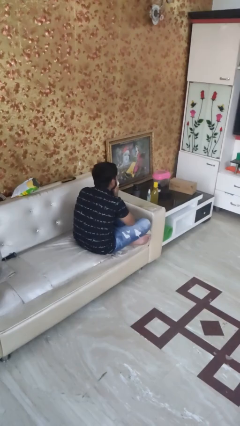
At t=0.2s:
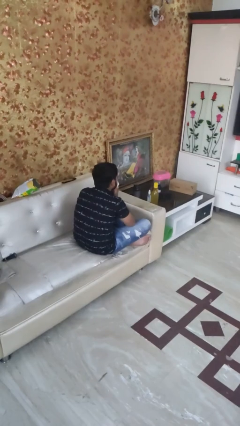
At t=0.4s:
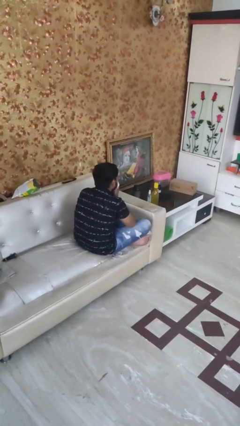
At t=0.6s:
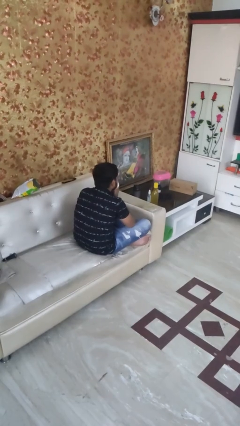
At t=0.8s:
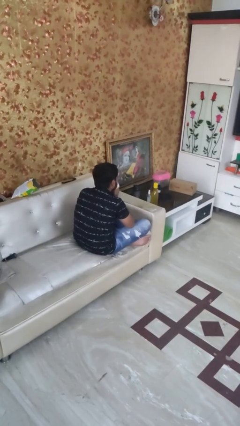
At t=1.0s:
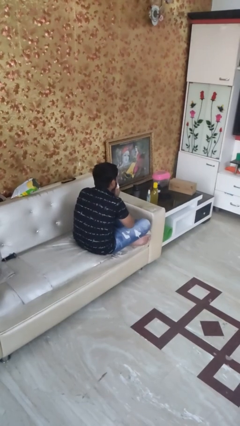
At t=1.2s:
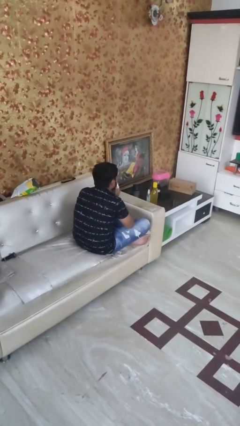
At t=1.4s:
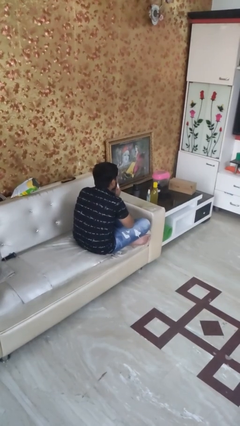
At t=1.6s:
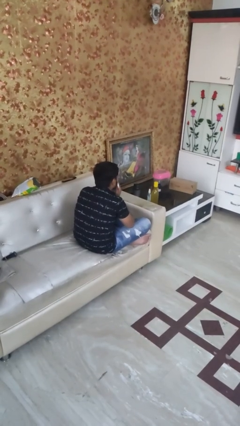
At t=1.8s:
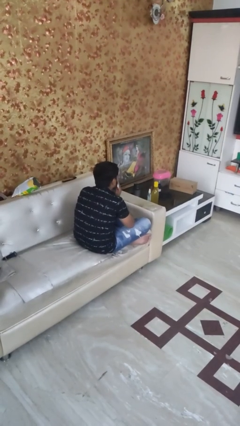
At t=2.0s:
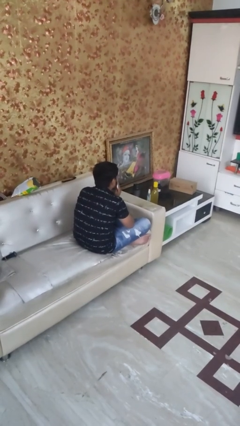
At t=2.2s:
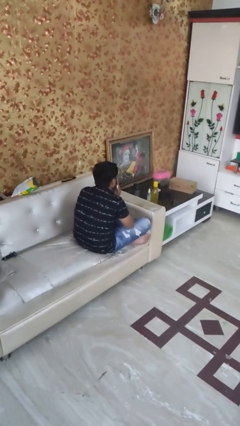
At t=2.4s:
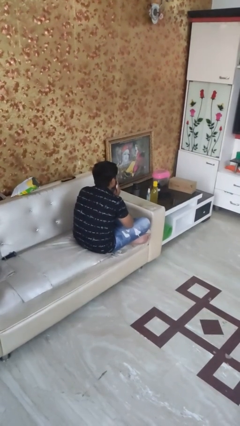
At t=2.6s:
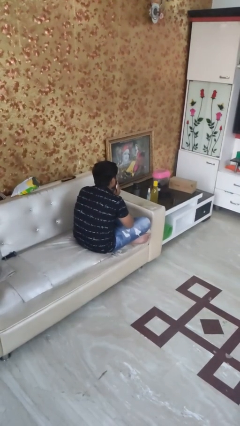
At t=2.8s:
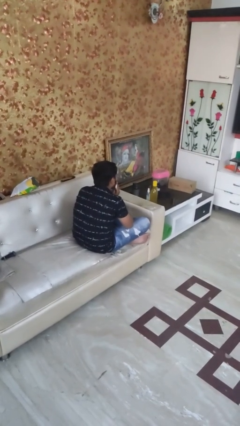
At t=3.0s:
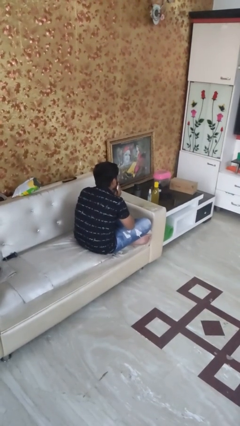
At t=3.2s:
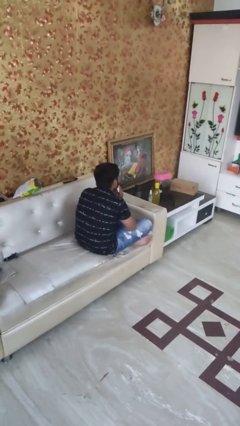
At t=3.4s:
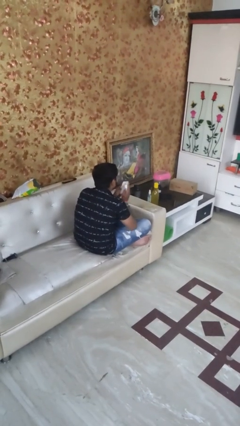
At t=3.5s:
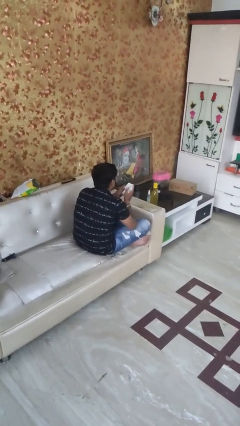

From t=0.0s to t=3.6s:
person wipes mouth with napkin

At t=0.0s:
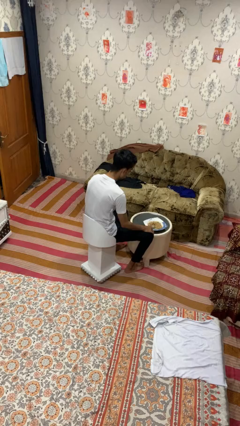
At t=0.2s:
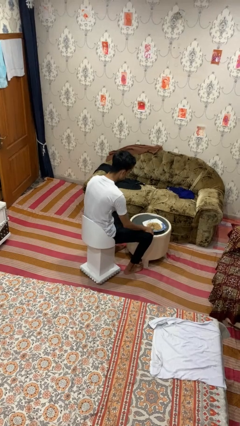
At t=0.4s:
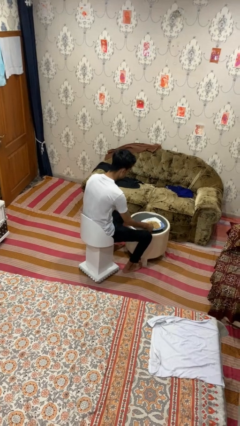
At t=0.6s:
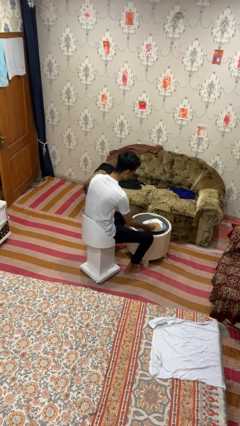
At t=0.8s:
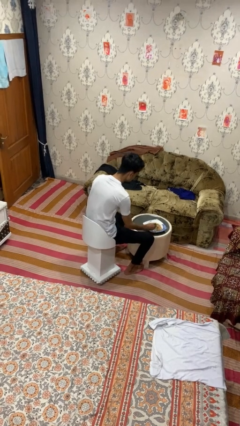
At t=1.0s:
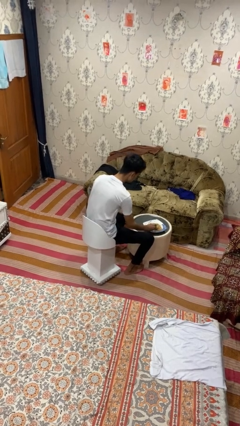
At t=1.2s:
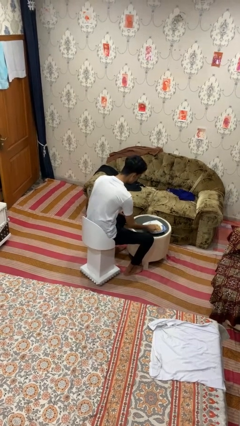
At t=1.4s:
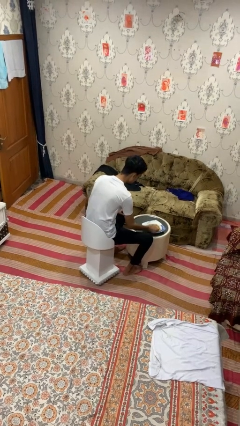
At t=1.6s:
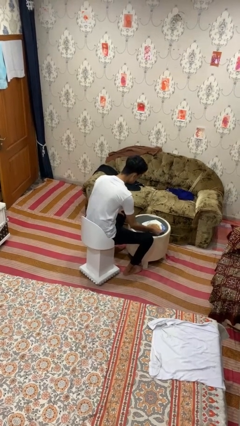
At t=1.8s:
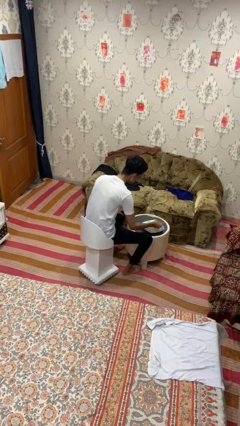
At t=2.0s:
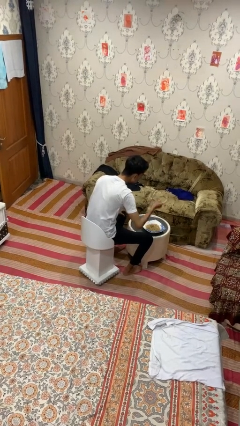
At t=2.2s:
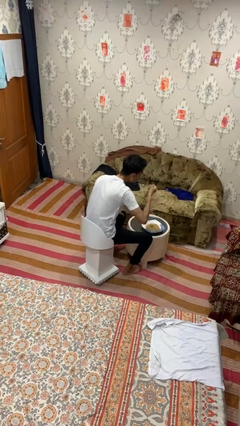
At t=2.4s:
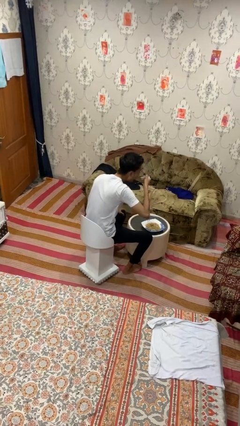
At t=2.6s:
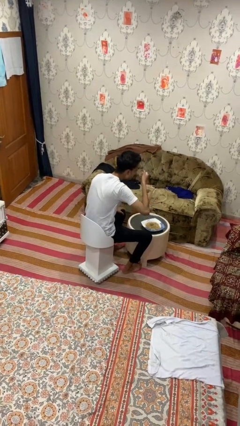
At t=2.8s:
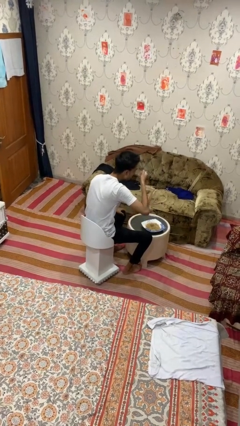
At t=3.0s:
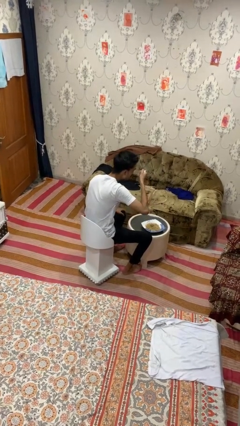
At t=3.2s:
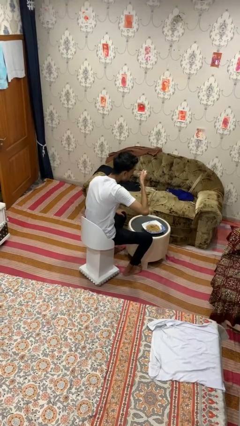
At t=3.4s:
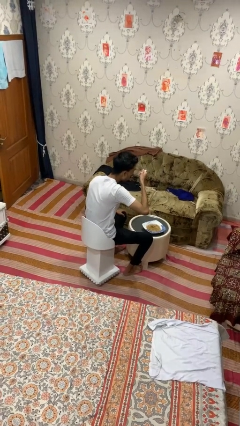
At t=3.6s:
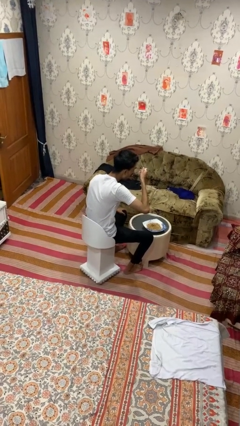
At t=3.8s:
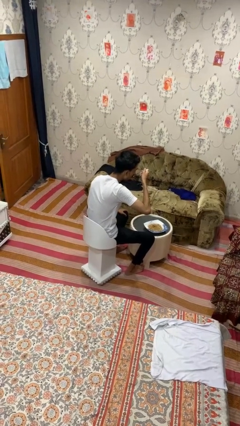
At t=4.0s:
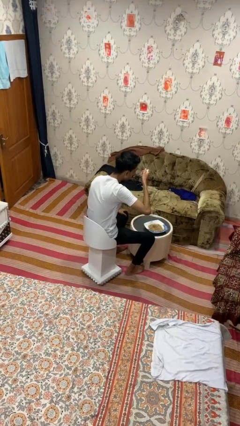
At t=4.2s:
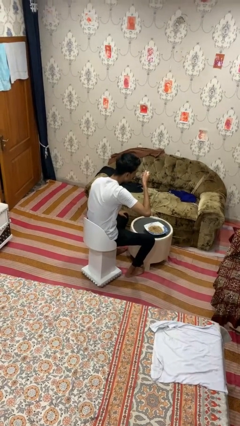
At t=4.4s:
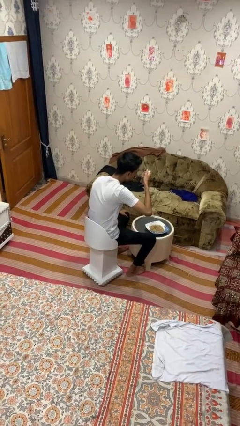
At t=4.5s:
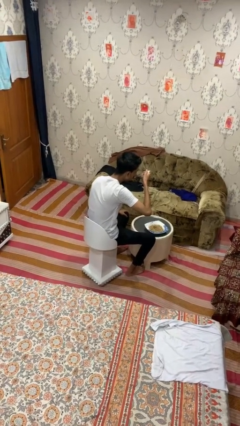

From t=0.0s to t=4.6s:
person eats with utensil

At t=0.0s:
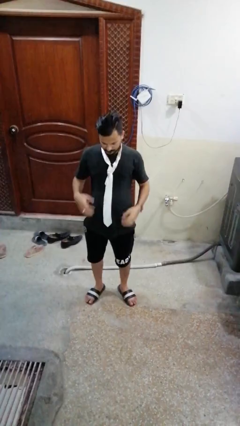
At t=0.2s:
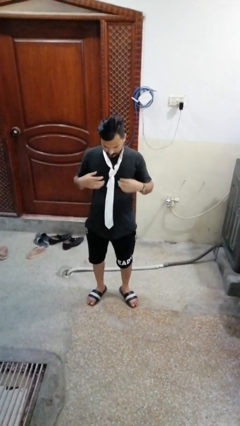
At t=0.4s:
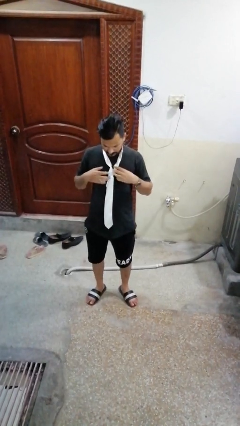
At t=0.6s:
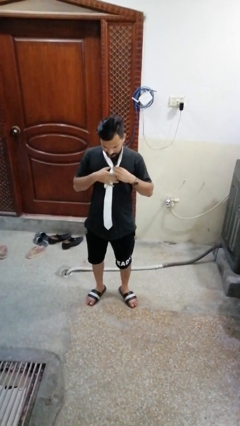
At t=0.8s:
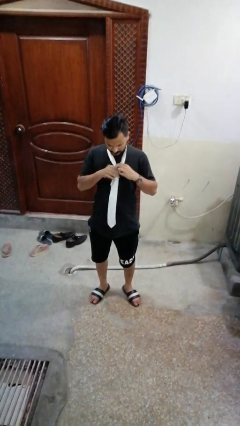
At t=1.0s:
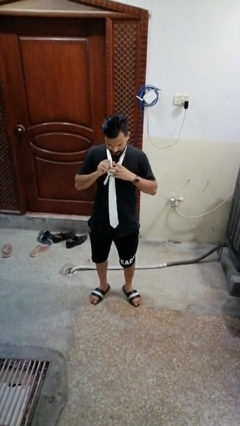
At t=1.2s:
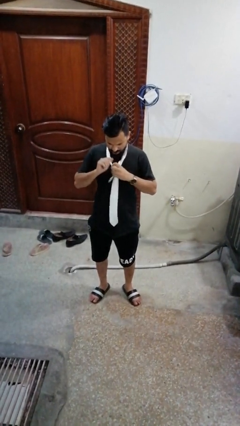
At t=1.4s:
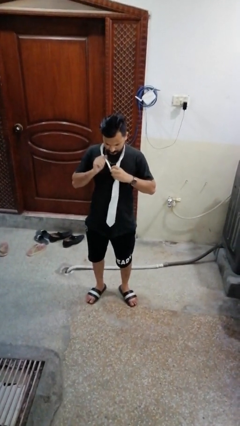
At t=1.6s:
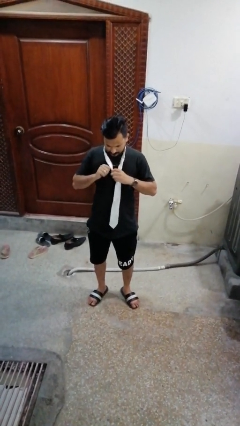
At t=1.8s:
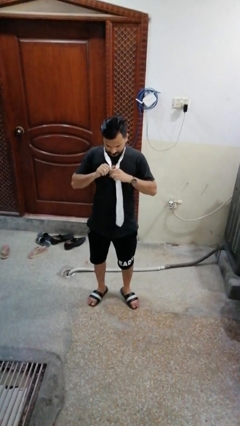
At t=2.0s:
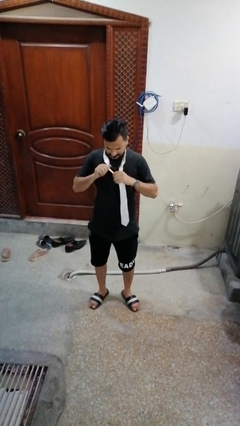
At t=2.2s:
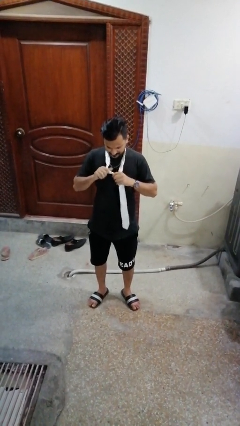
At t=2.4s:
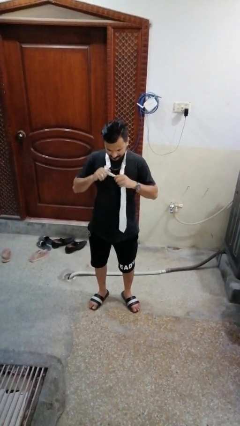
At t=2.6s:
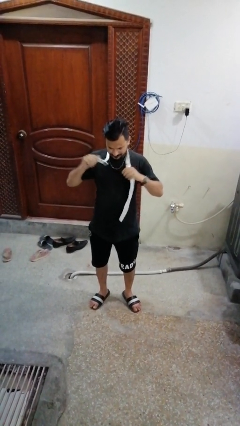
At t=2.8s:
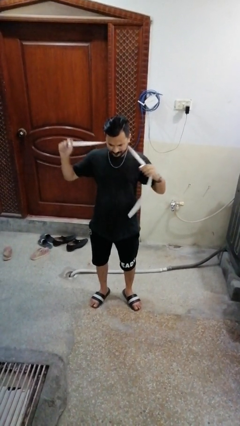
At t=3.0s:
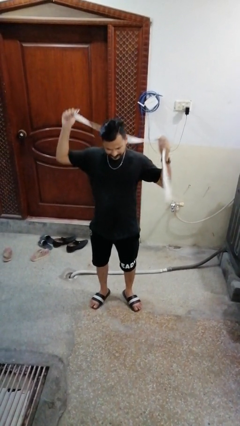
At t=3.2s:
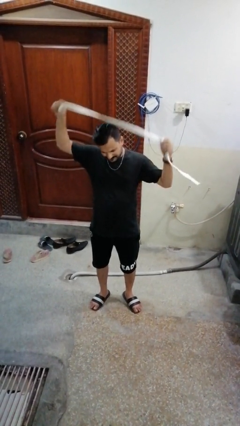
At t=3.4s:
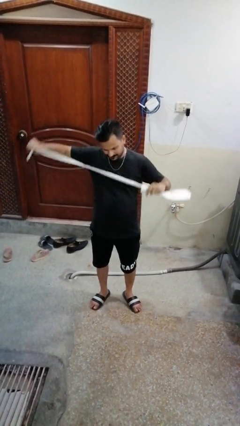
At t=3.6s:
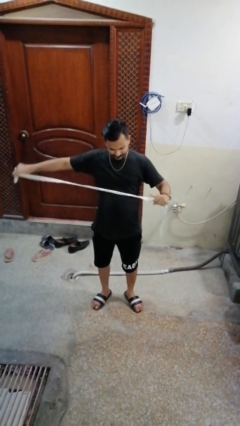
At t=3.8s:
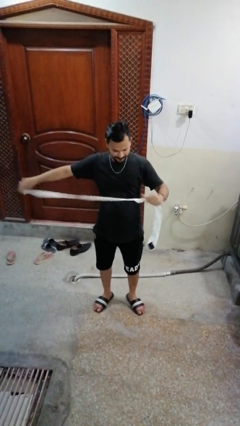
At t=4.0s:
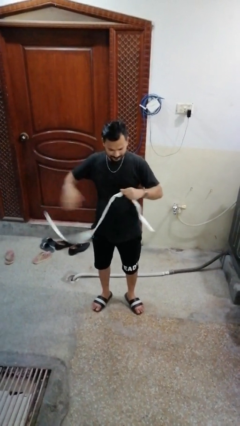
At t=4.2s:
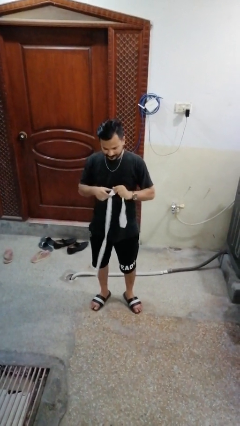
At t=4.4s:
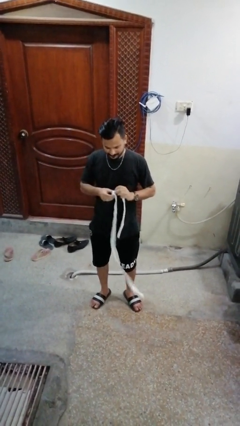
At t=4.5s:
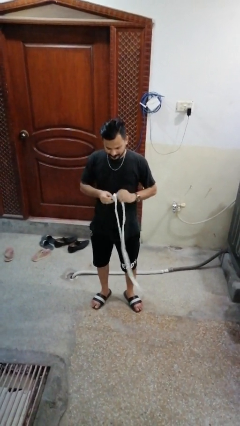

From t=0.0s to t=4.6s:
person takes off necktie

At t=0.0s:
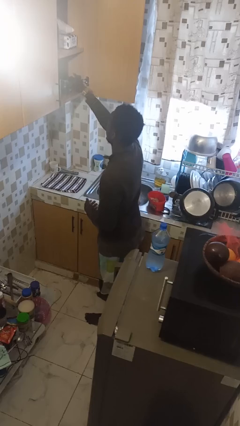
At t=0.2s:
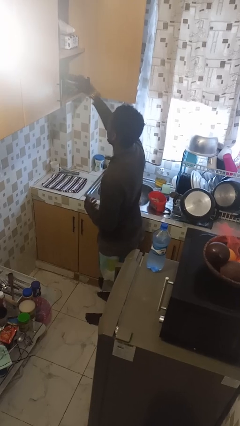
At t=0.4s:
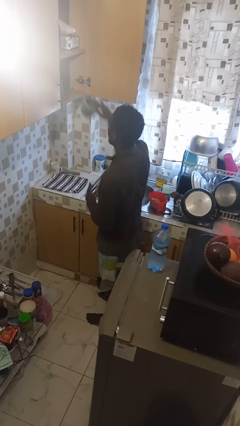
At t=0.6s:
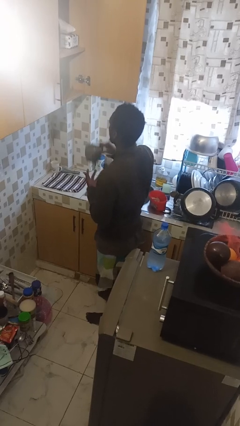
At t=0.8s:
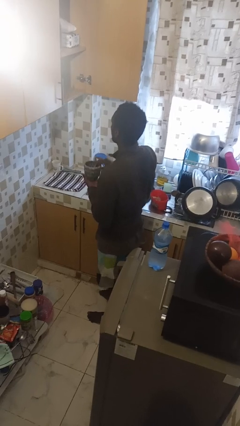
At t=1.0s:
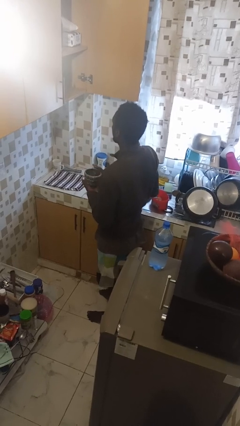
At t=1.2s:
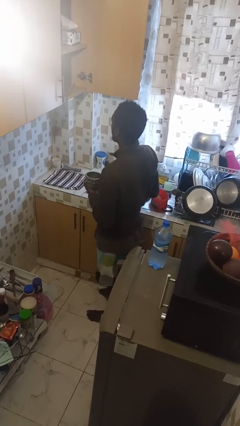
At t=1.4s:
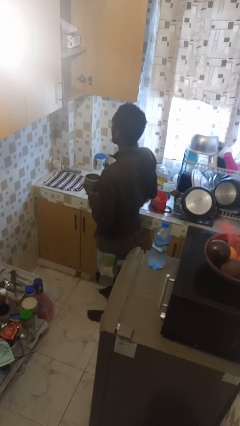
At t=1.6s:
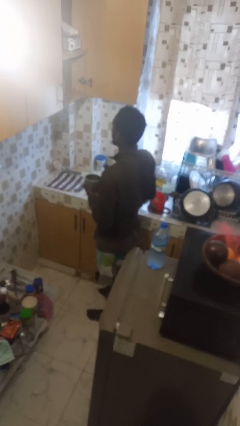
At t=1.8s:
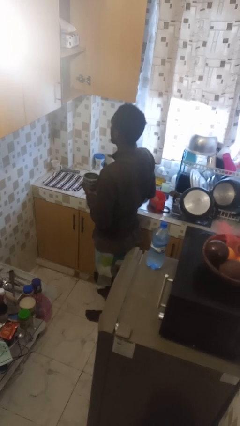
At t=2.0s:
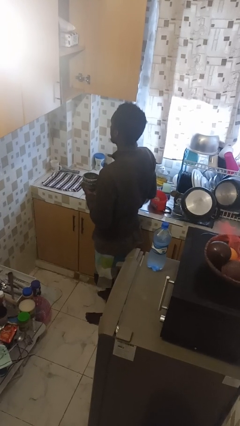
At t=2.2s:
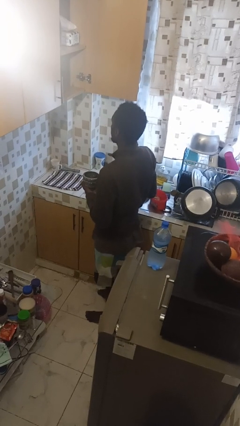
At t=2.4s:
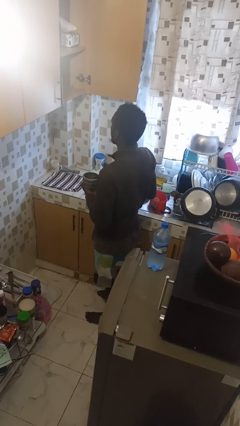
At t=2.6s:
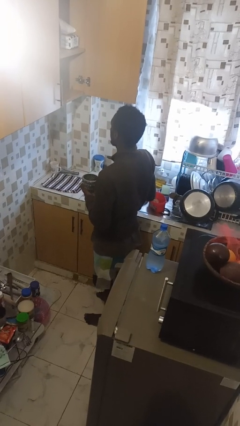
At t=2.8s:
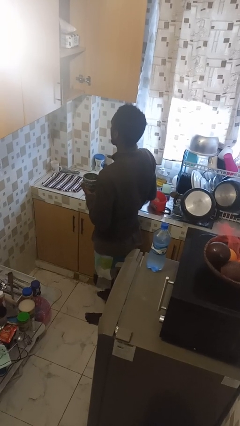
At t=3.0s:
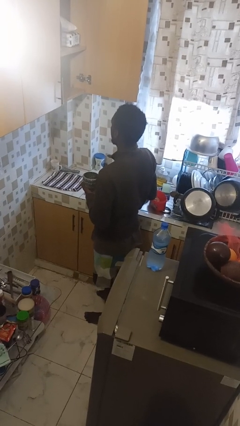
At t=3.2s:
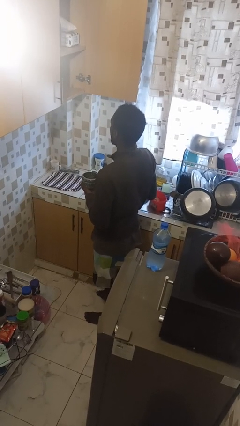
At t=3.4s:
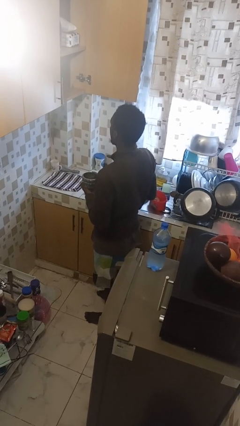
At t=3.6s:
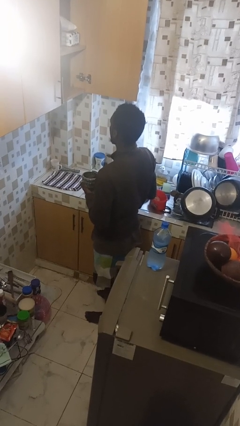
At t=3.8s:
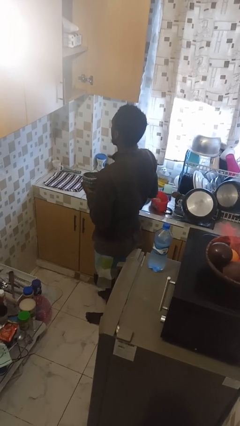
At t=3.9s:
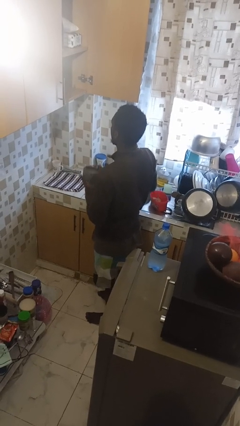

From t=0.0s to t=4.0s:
person picks up object from cabinet

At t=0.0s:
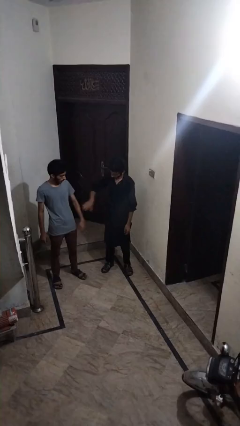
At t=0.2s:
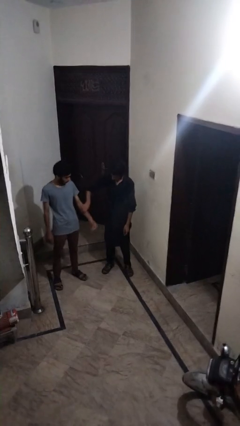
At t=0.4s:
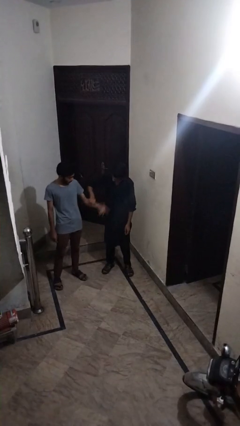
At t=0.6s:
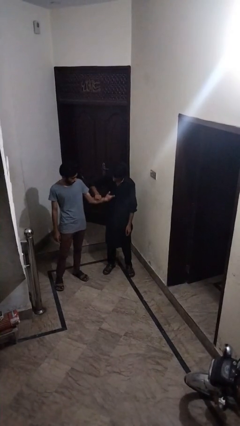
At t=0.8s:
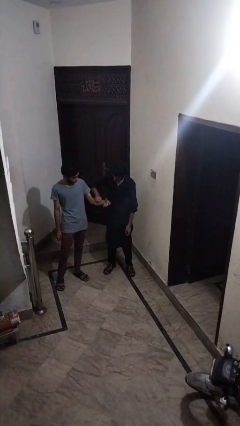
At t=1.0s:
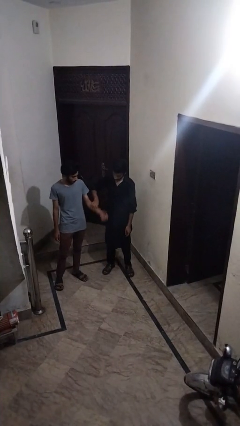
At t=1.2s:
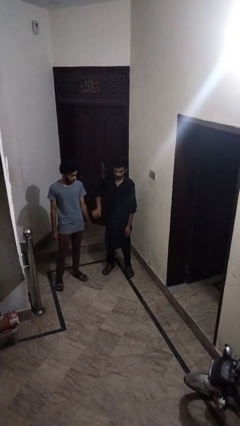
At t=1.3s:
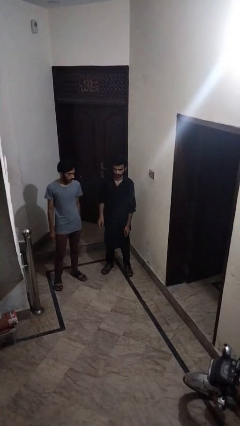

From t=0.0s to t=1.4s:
person grabs person by forearm
